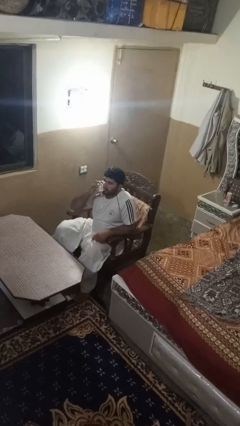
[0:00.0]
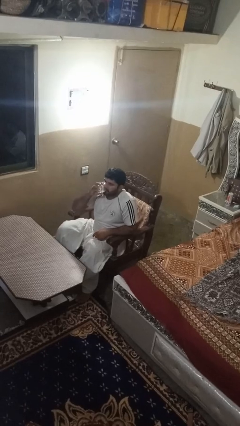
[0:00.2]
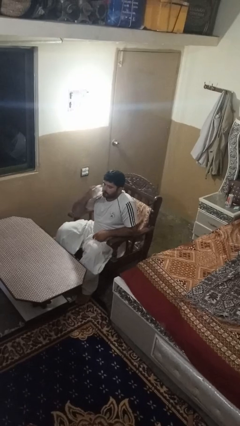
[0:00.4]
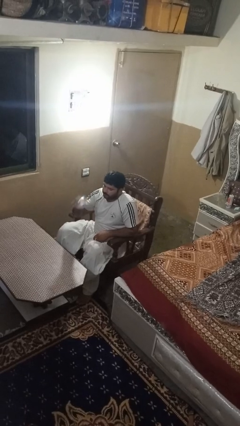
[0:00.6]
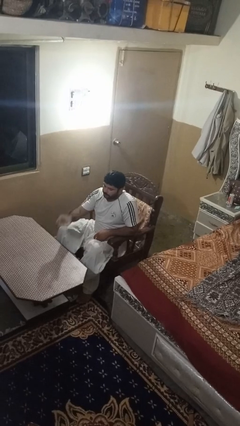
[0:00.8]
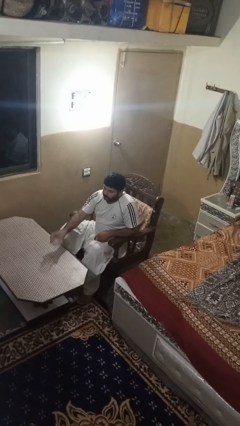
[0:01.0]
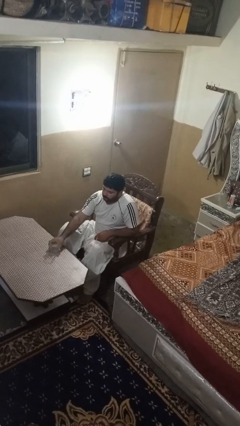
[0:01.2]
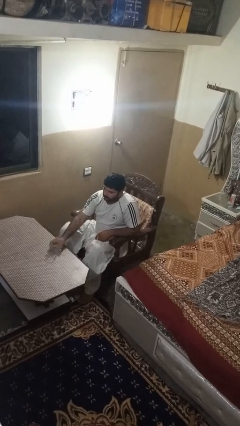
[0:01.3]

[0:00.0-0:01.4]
person puts down object on table

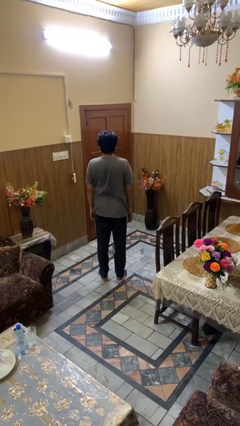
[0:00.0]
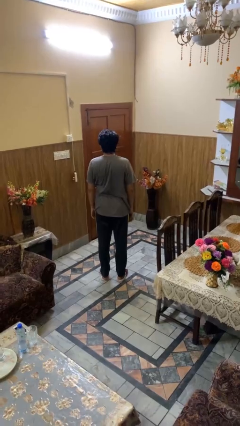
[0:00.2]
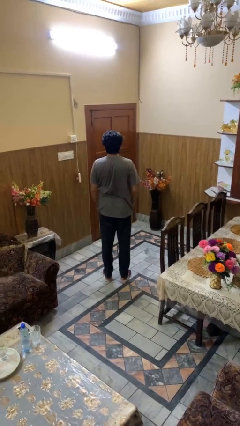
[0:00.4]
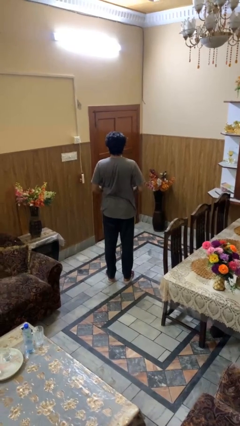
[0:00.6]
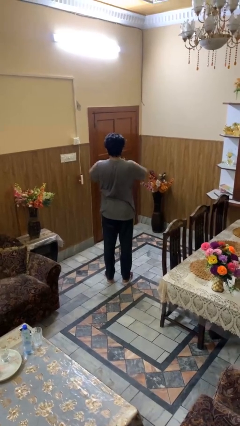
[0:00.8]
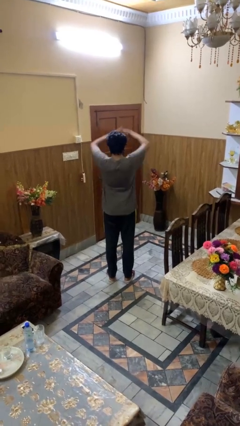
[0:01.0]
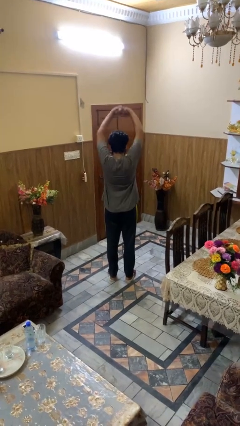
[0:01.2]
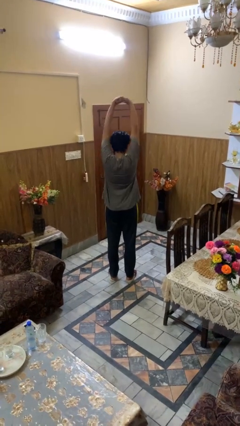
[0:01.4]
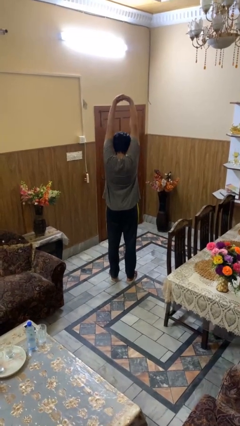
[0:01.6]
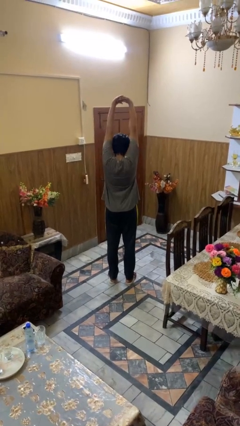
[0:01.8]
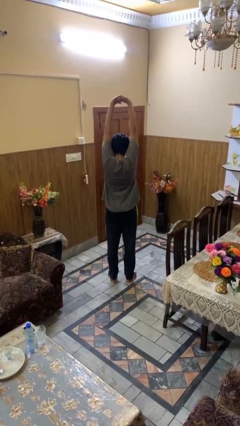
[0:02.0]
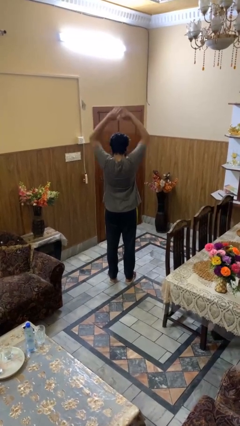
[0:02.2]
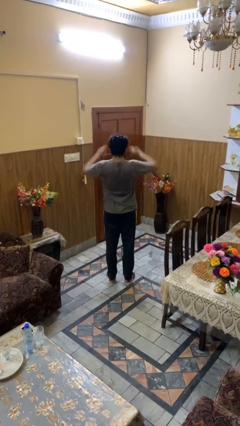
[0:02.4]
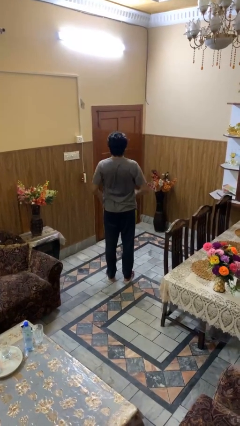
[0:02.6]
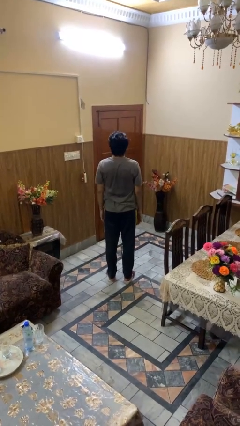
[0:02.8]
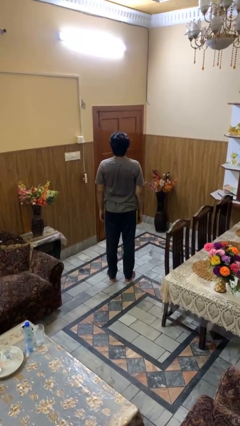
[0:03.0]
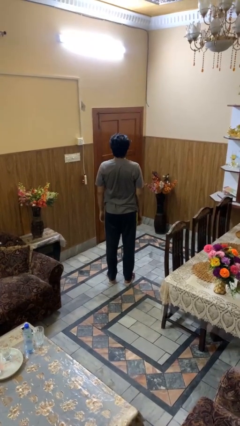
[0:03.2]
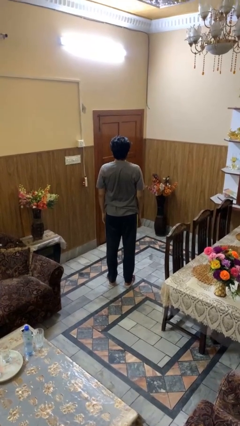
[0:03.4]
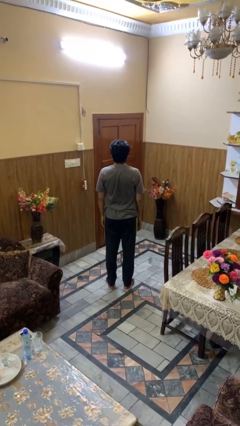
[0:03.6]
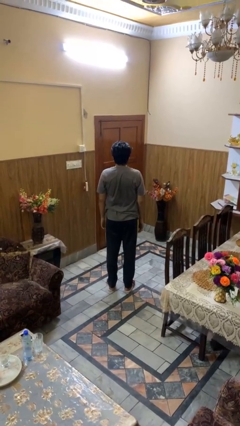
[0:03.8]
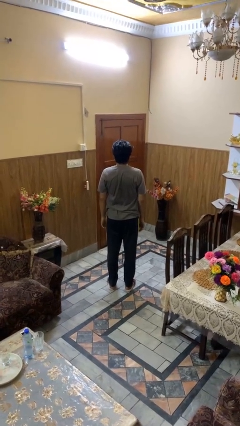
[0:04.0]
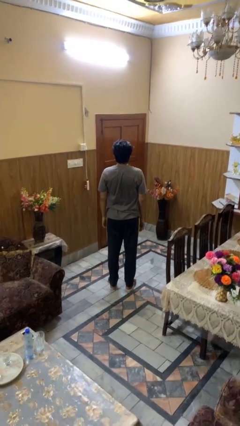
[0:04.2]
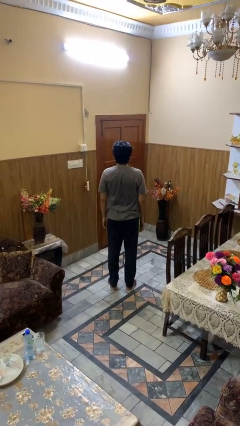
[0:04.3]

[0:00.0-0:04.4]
person stretches arms over head

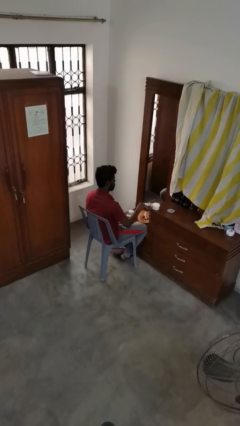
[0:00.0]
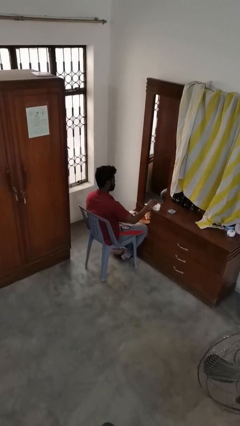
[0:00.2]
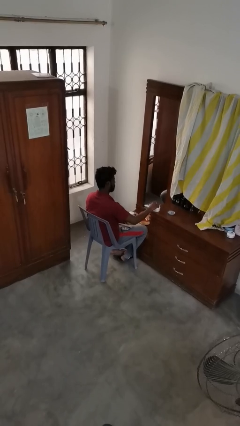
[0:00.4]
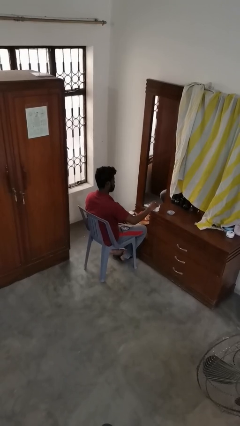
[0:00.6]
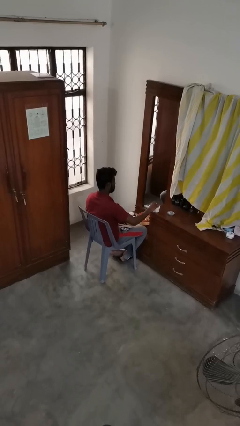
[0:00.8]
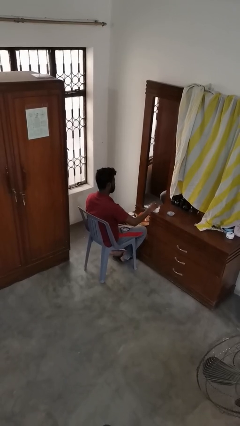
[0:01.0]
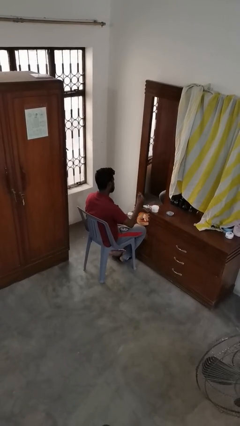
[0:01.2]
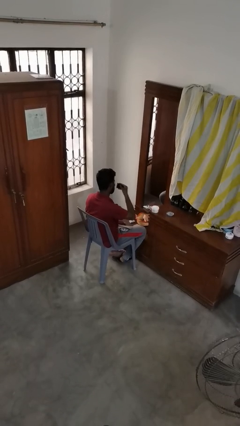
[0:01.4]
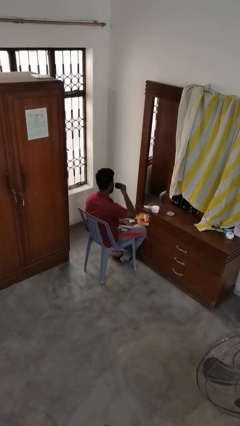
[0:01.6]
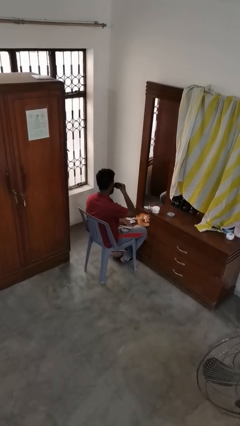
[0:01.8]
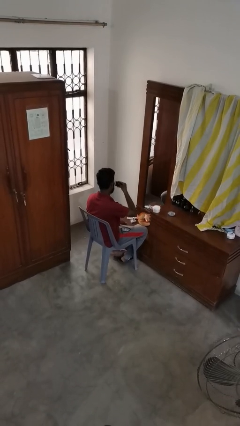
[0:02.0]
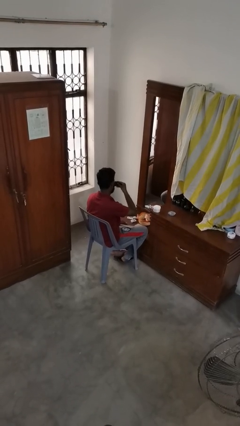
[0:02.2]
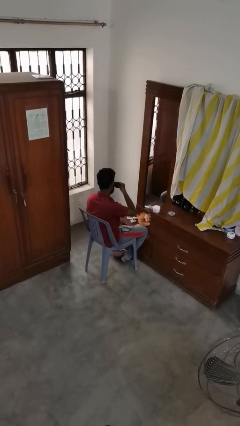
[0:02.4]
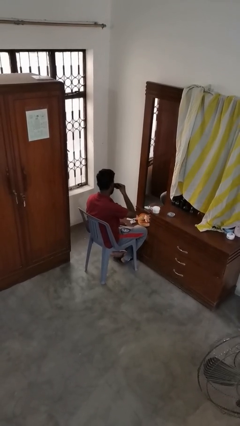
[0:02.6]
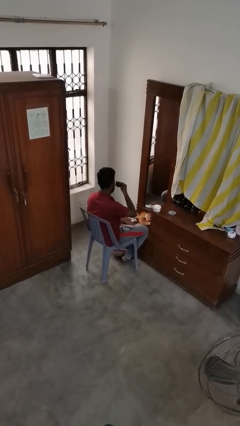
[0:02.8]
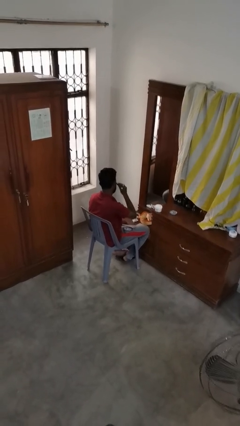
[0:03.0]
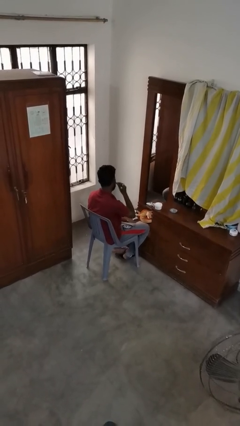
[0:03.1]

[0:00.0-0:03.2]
person applies foundation makeup

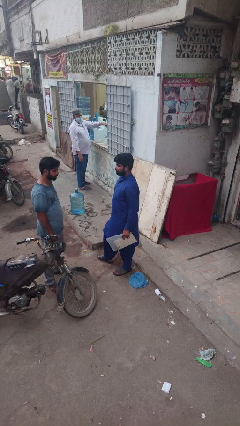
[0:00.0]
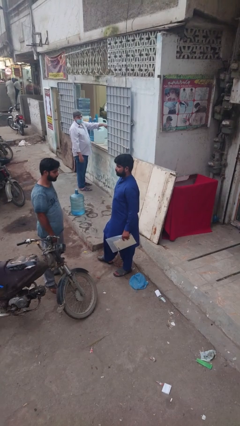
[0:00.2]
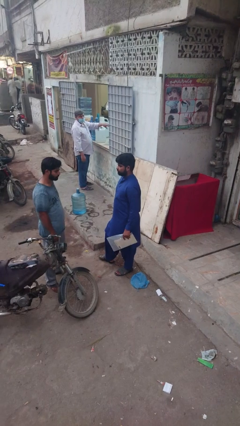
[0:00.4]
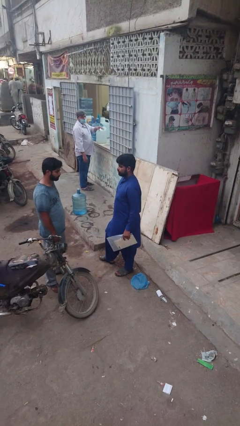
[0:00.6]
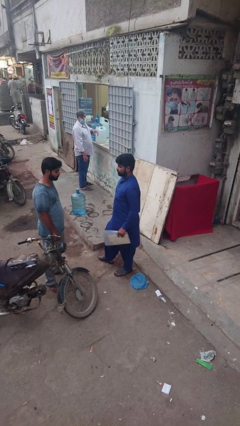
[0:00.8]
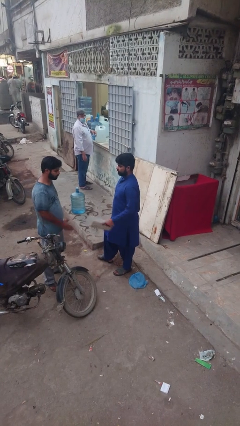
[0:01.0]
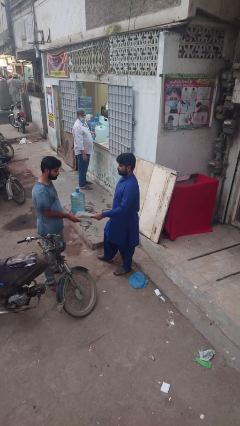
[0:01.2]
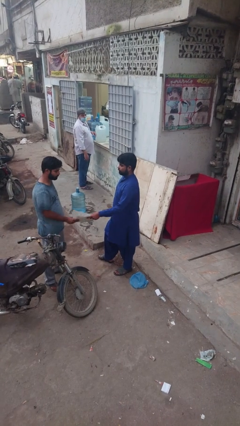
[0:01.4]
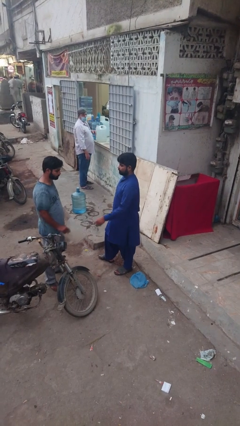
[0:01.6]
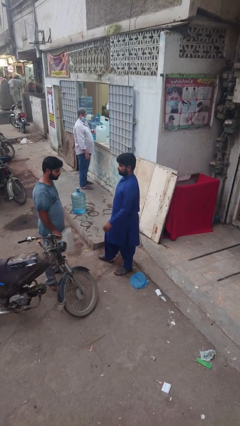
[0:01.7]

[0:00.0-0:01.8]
person transfers object to person

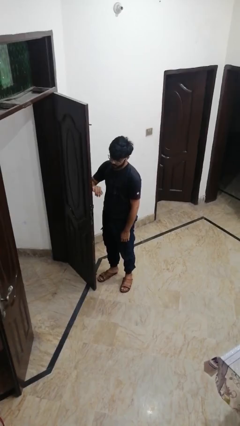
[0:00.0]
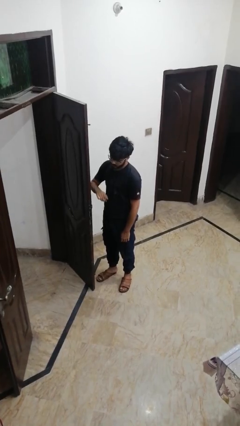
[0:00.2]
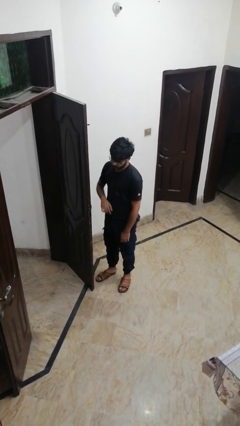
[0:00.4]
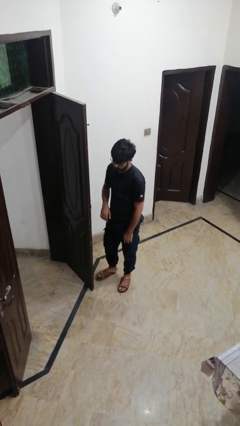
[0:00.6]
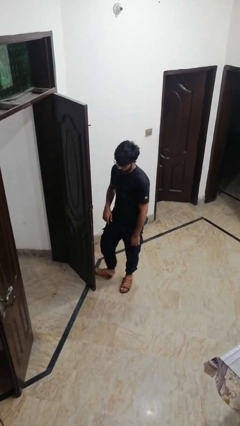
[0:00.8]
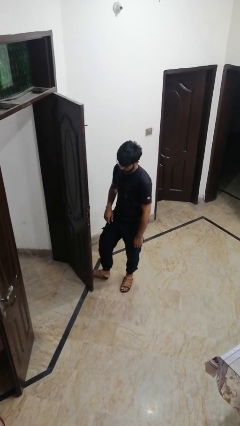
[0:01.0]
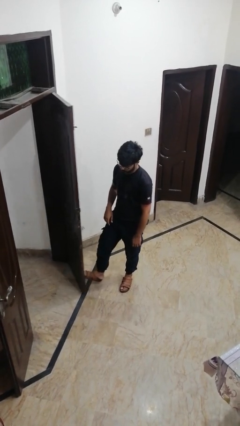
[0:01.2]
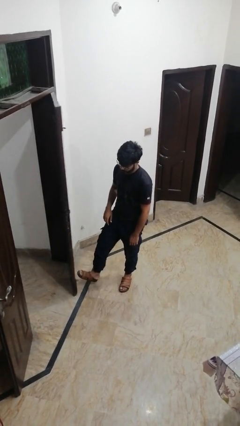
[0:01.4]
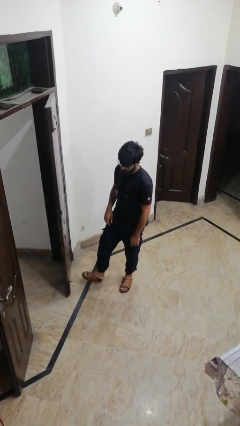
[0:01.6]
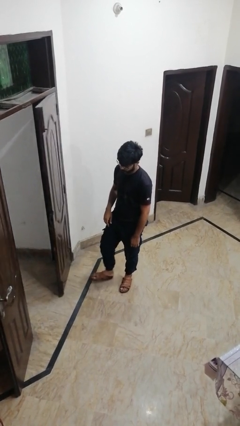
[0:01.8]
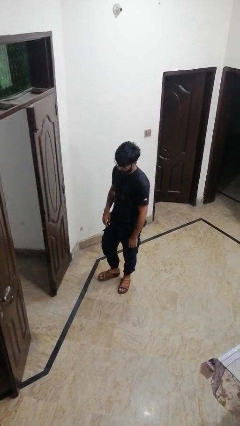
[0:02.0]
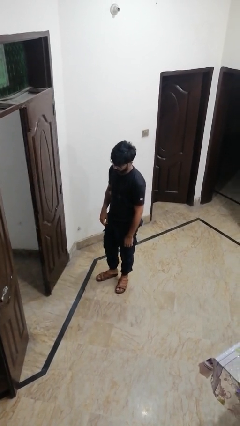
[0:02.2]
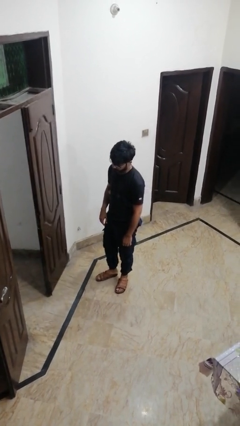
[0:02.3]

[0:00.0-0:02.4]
person closes door with foot

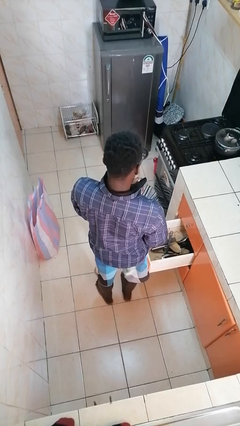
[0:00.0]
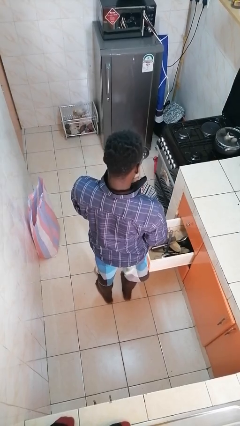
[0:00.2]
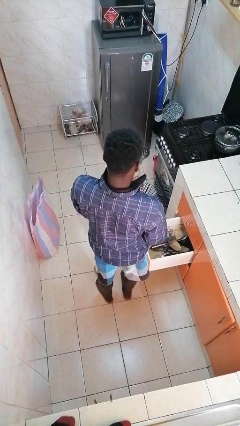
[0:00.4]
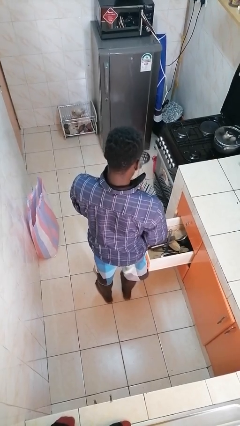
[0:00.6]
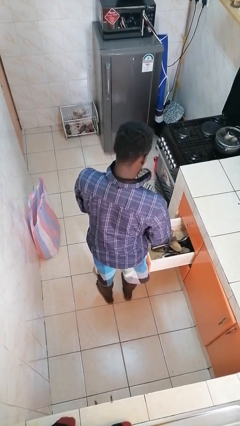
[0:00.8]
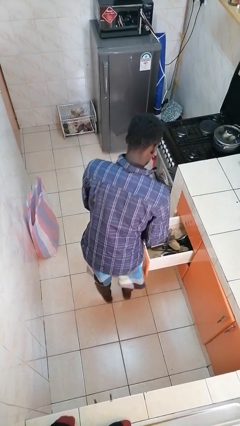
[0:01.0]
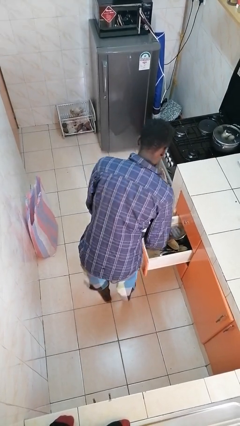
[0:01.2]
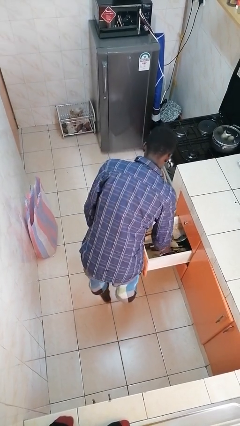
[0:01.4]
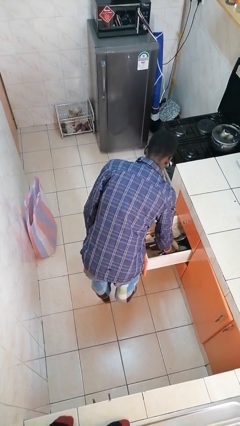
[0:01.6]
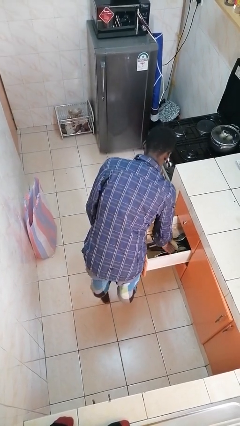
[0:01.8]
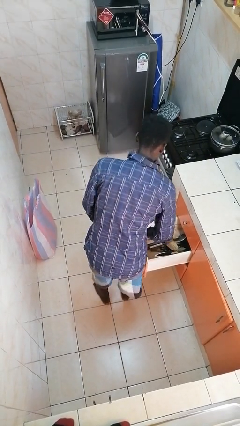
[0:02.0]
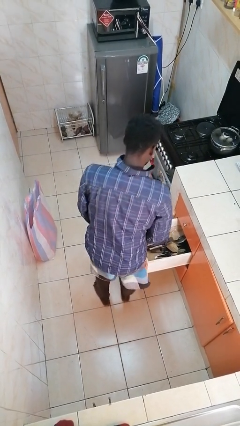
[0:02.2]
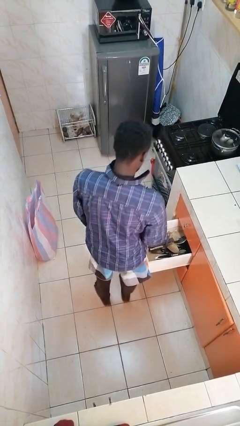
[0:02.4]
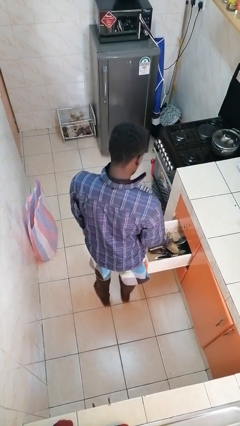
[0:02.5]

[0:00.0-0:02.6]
person puts object into kitchen drawer

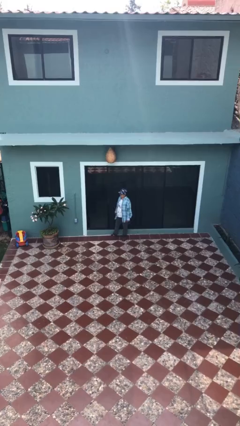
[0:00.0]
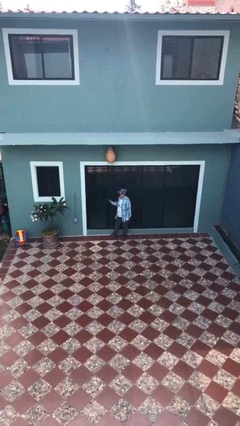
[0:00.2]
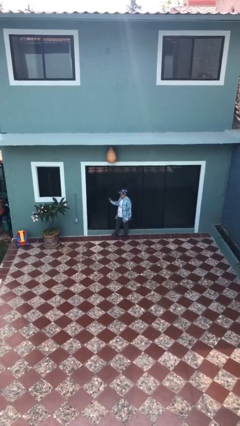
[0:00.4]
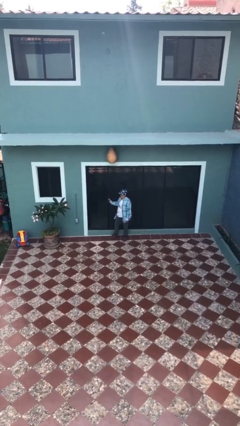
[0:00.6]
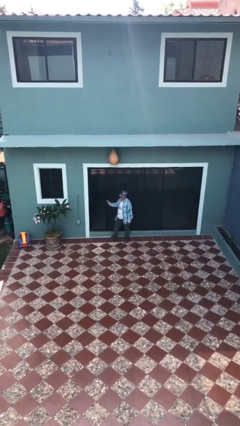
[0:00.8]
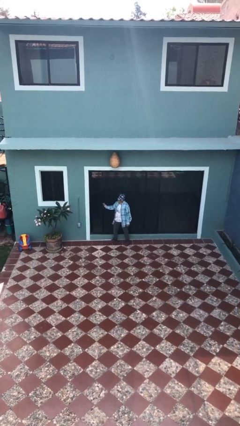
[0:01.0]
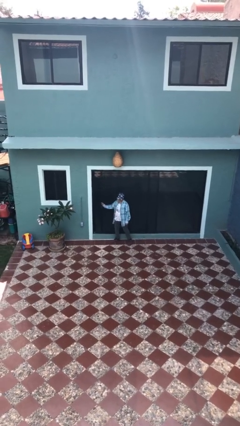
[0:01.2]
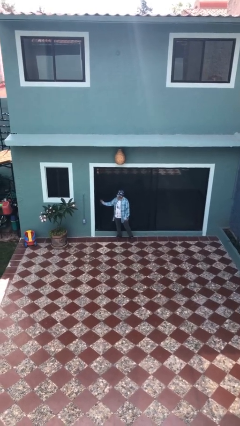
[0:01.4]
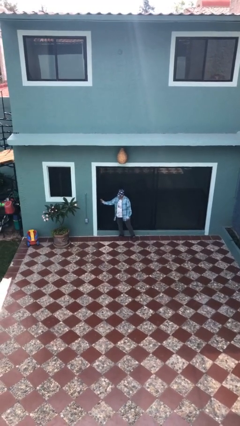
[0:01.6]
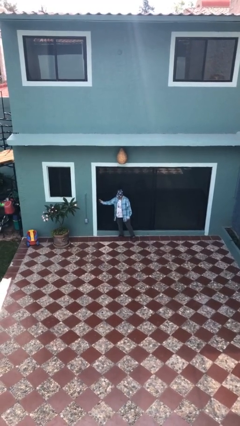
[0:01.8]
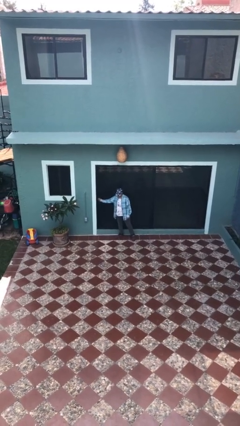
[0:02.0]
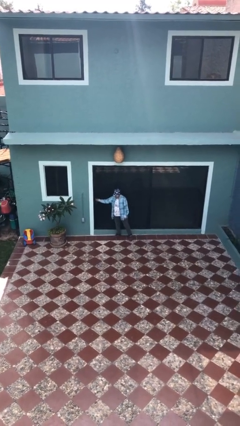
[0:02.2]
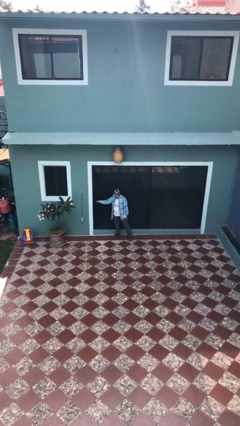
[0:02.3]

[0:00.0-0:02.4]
person closes sliding door
